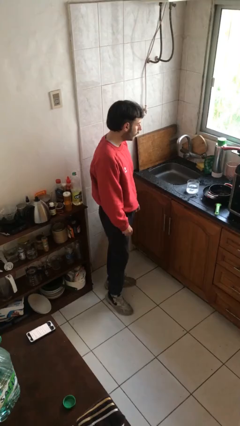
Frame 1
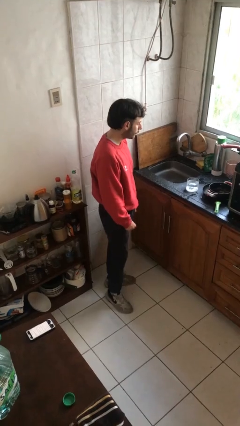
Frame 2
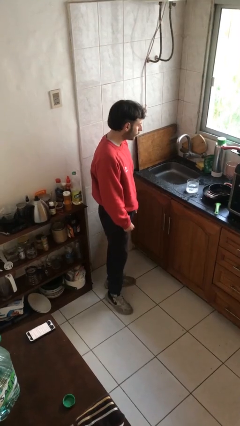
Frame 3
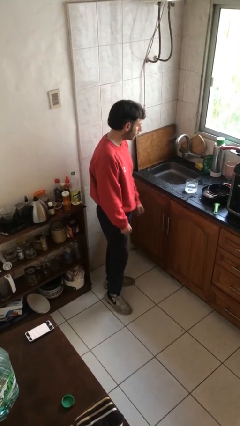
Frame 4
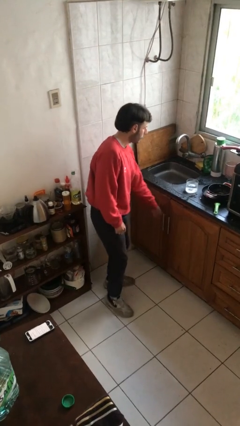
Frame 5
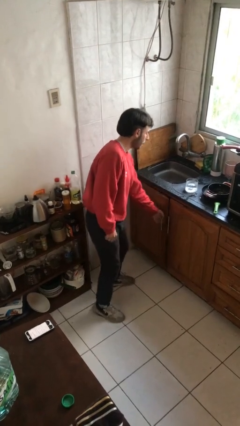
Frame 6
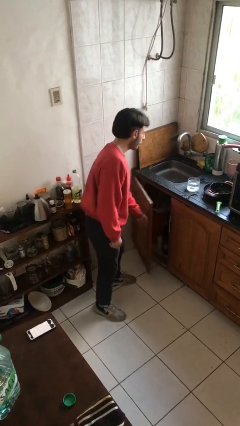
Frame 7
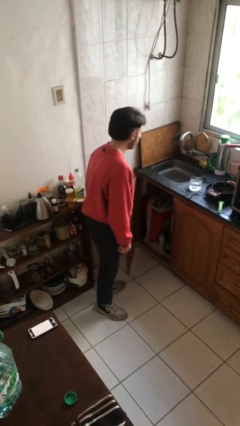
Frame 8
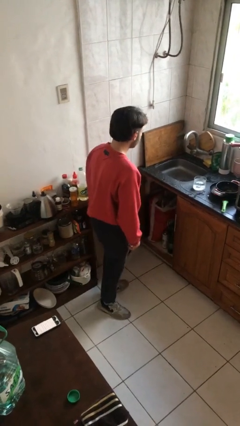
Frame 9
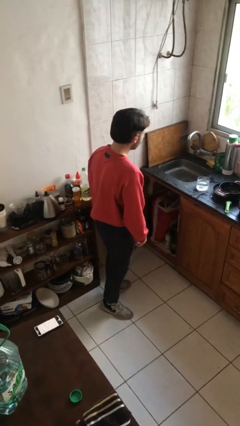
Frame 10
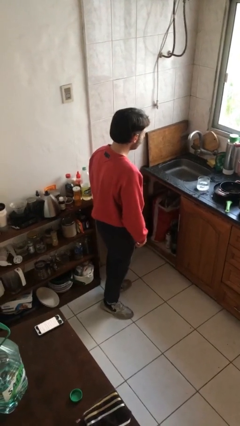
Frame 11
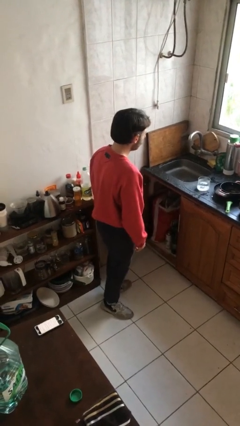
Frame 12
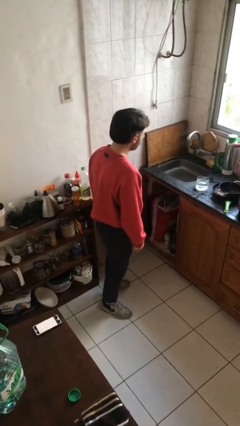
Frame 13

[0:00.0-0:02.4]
person opens cabinet

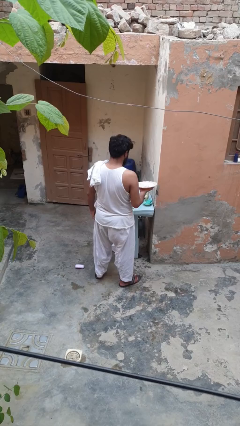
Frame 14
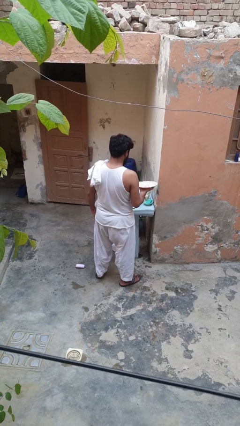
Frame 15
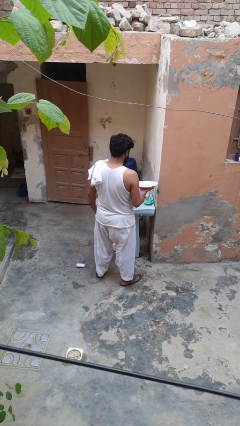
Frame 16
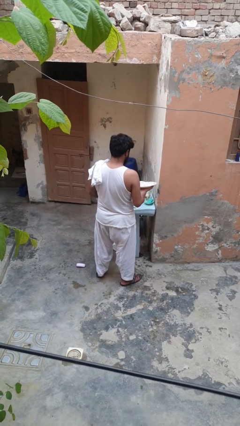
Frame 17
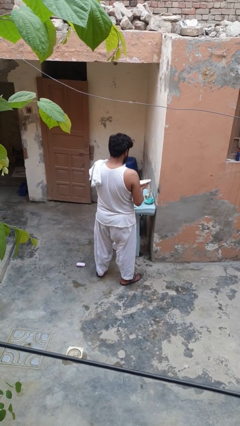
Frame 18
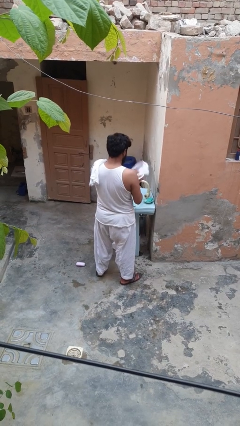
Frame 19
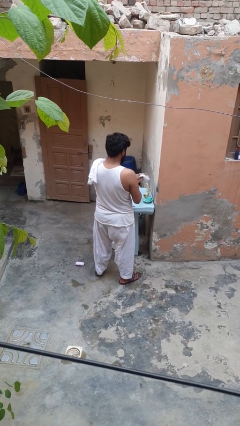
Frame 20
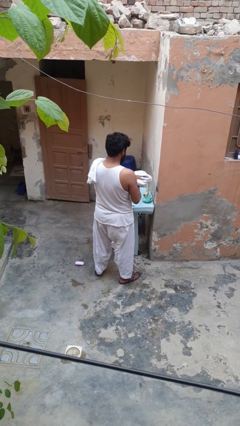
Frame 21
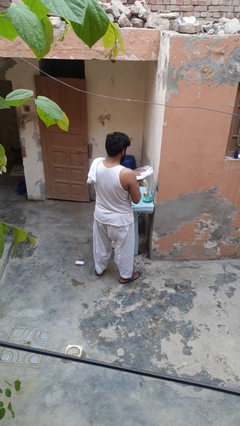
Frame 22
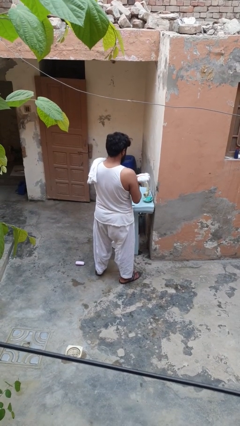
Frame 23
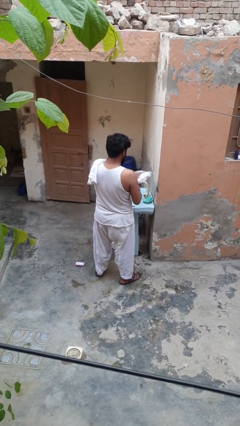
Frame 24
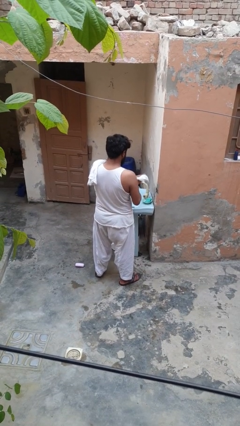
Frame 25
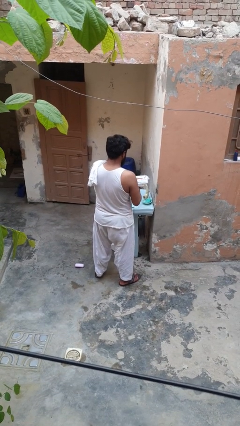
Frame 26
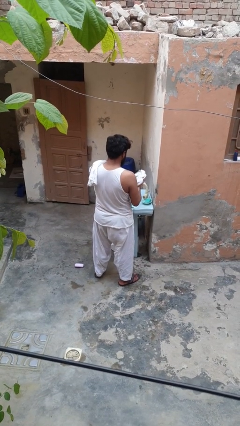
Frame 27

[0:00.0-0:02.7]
person dries dish

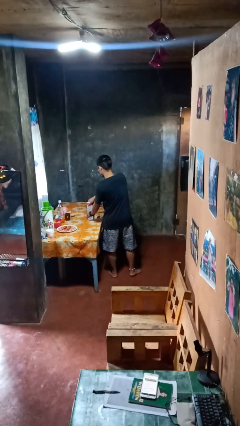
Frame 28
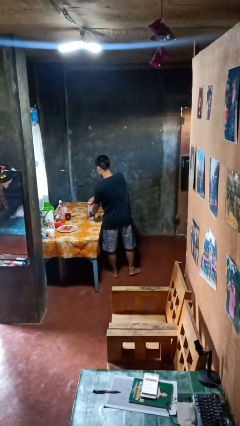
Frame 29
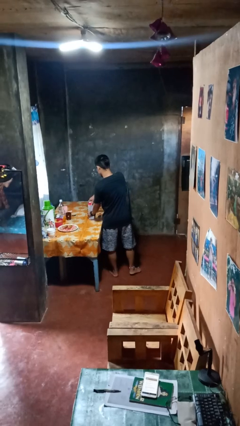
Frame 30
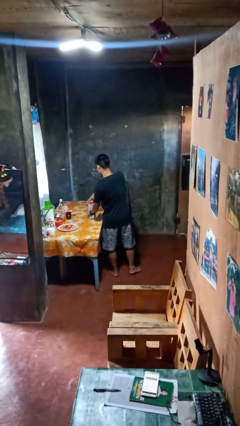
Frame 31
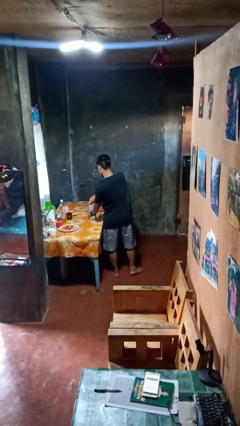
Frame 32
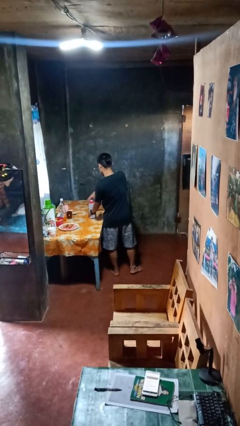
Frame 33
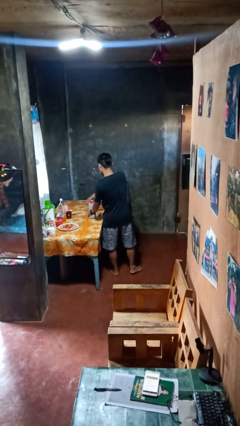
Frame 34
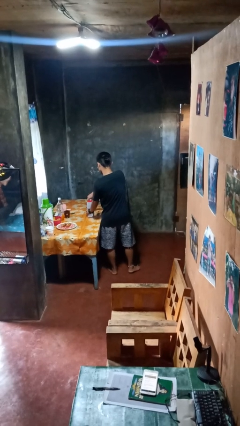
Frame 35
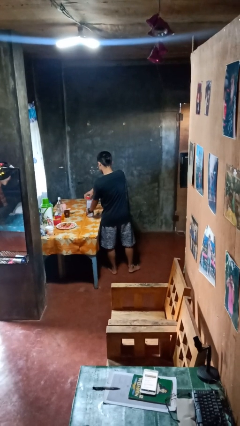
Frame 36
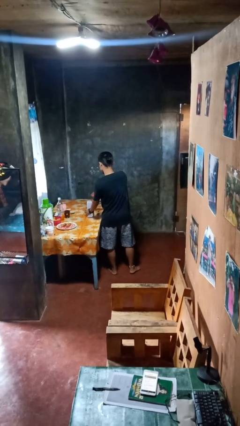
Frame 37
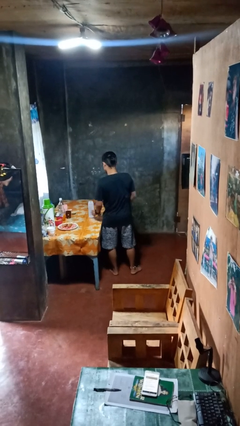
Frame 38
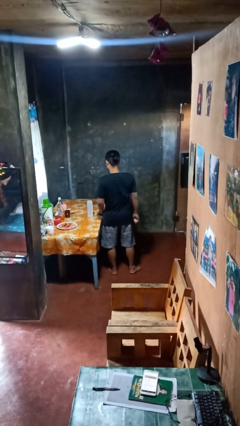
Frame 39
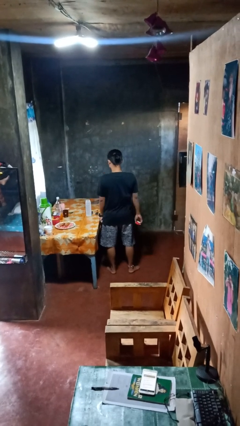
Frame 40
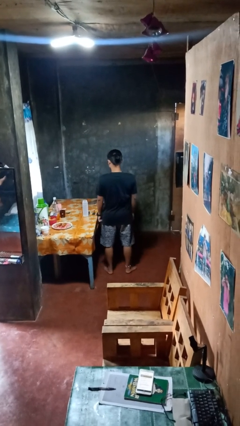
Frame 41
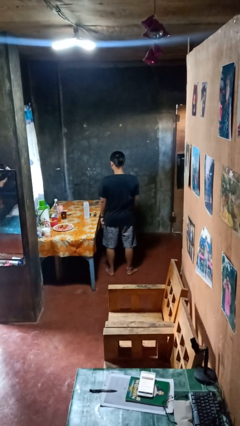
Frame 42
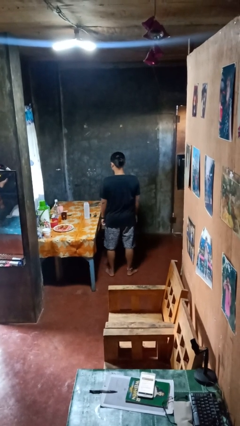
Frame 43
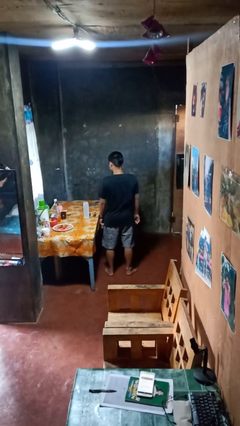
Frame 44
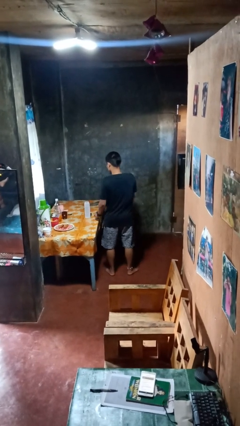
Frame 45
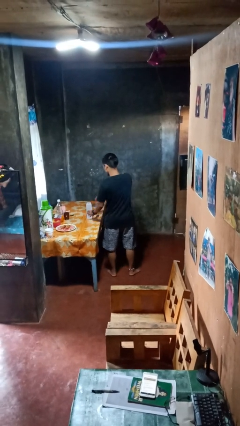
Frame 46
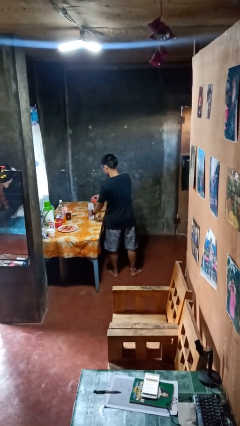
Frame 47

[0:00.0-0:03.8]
person opens jar

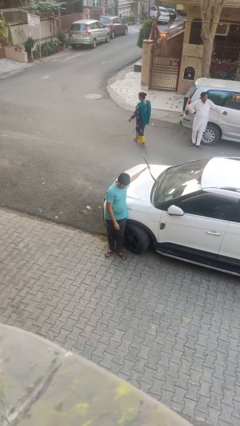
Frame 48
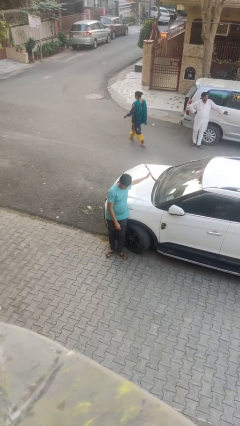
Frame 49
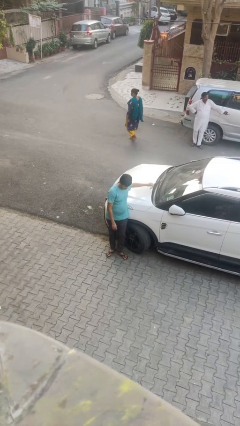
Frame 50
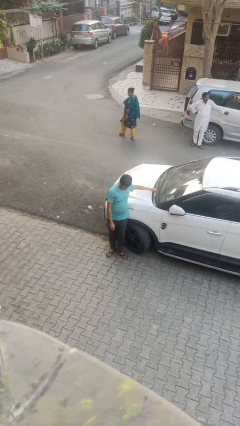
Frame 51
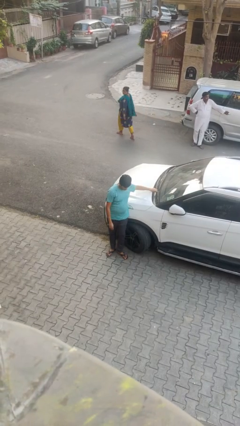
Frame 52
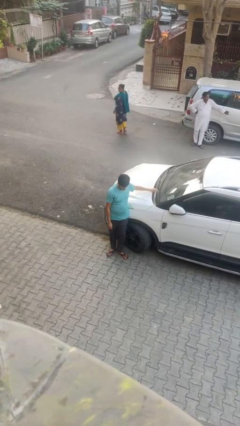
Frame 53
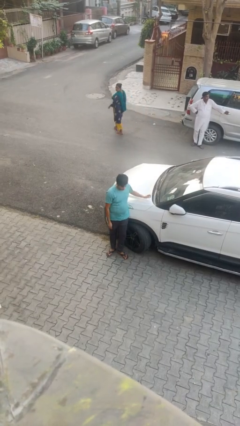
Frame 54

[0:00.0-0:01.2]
person flips down car wipers

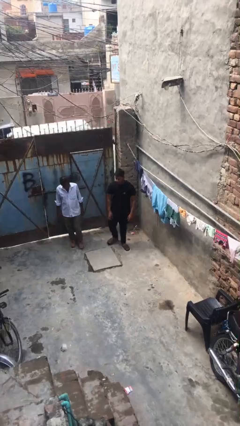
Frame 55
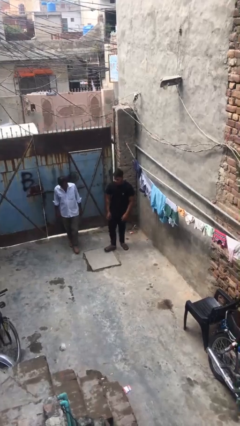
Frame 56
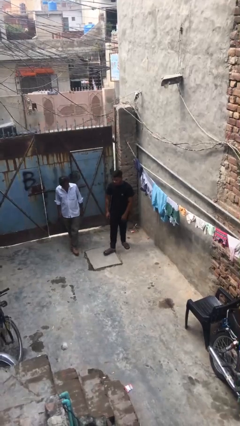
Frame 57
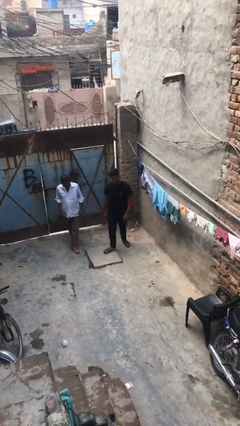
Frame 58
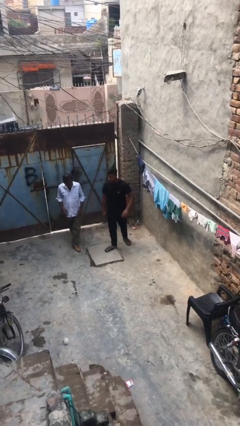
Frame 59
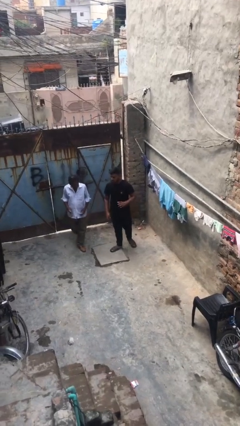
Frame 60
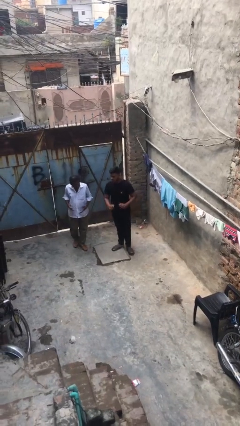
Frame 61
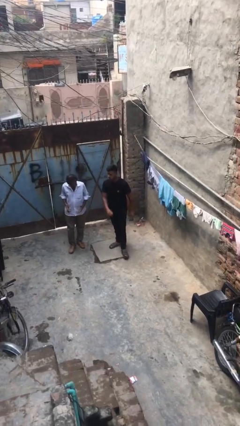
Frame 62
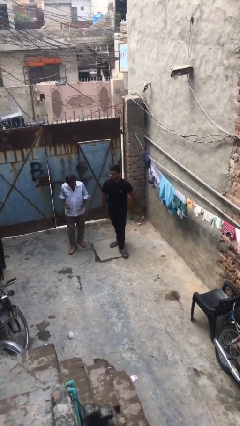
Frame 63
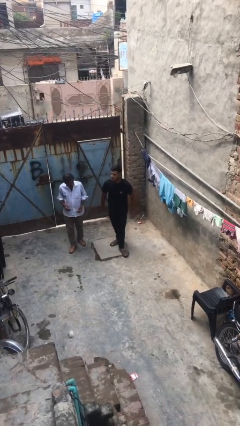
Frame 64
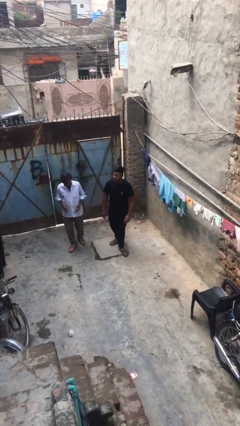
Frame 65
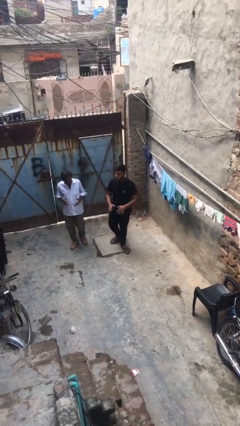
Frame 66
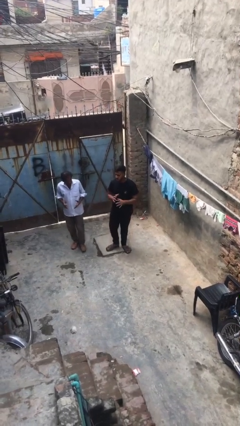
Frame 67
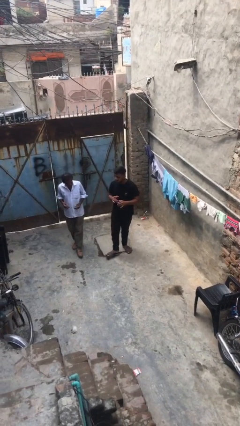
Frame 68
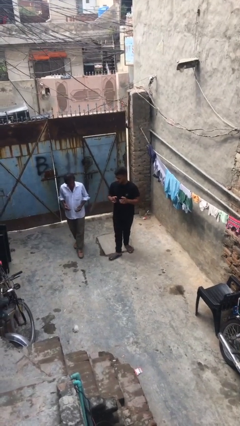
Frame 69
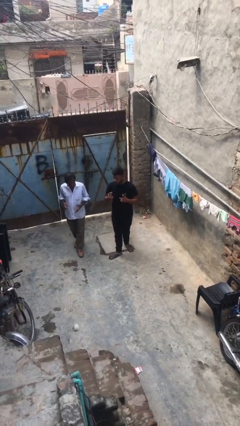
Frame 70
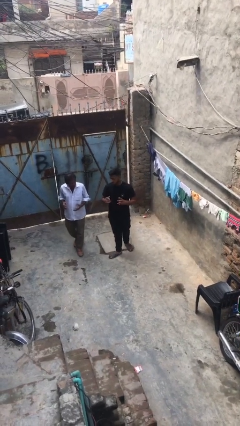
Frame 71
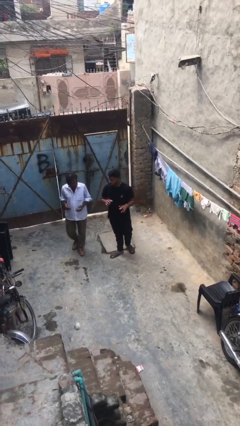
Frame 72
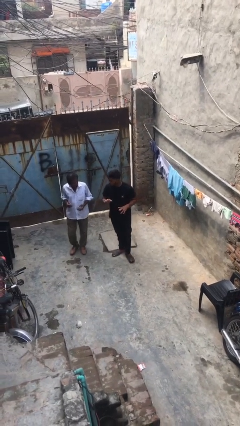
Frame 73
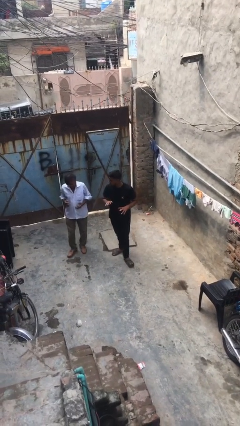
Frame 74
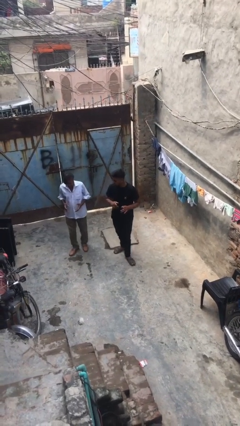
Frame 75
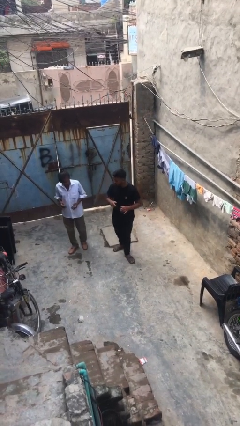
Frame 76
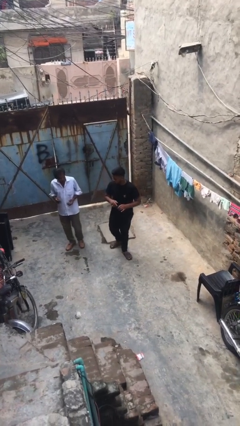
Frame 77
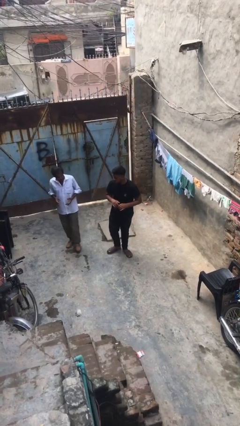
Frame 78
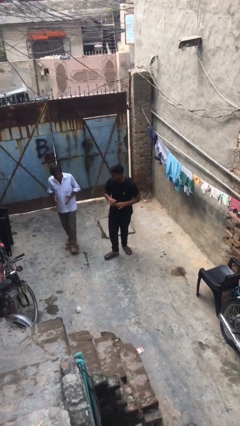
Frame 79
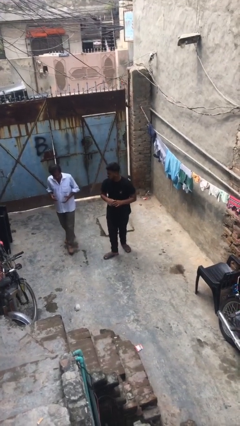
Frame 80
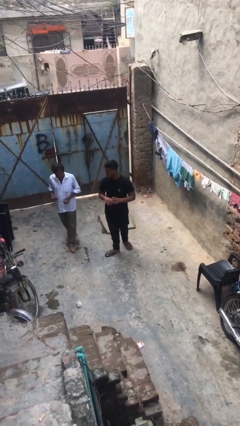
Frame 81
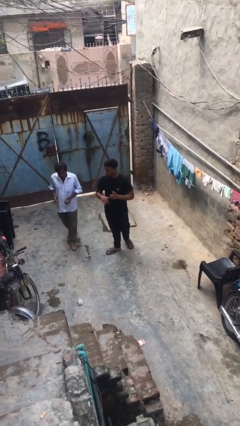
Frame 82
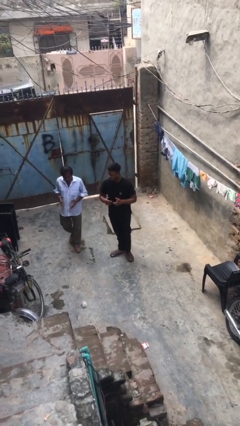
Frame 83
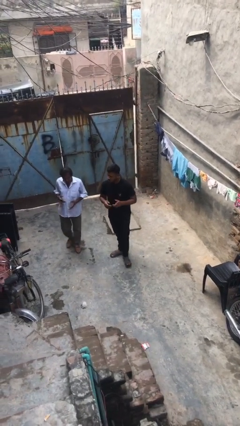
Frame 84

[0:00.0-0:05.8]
person talks to person

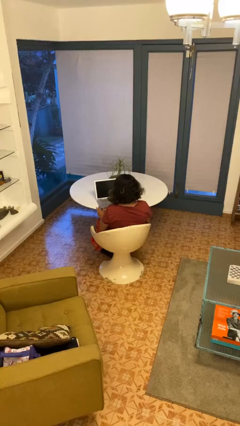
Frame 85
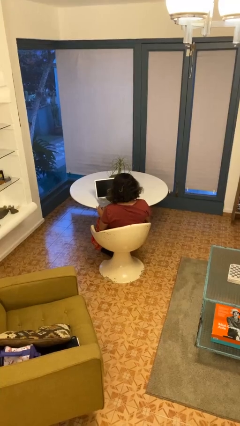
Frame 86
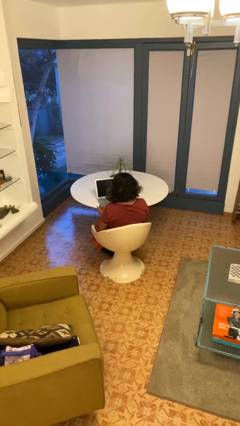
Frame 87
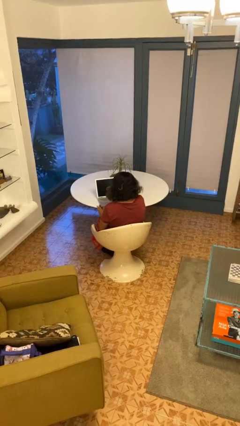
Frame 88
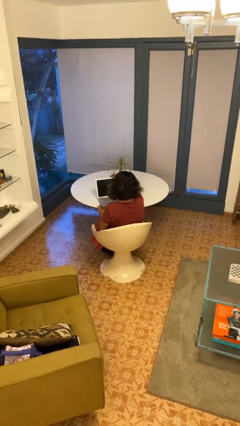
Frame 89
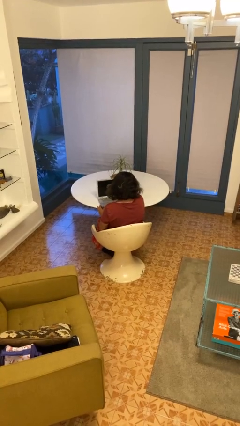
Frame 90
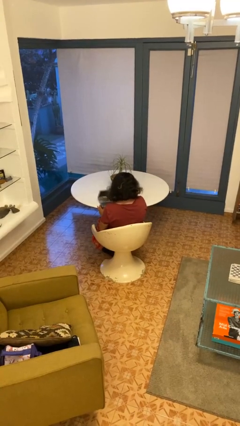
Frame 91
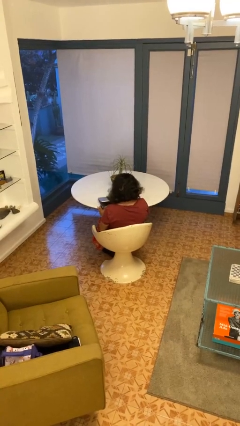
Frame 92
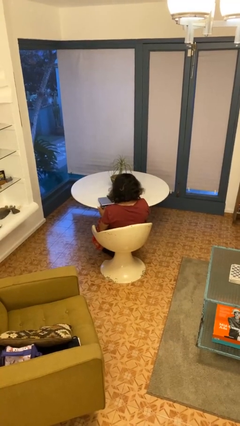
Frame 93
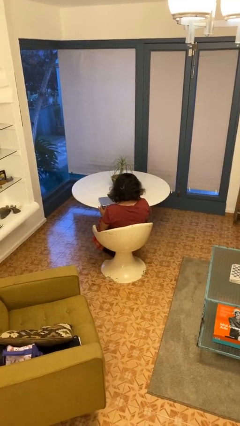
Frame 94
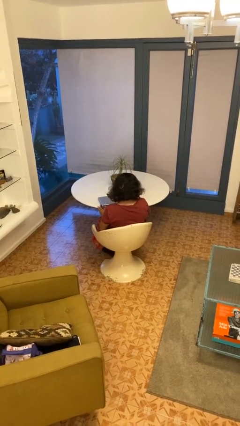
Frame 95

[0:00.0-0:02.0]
person closes laptop
